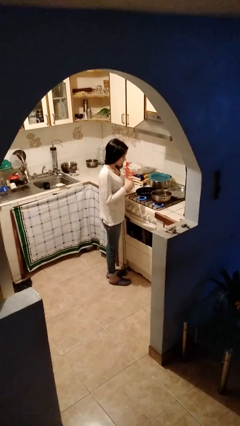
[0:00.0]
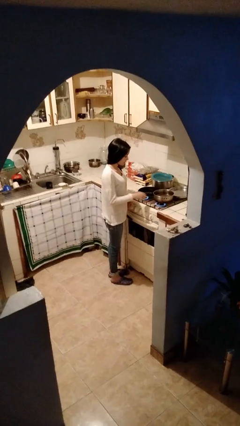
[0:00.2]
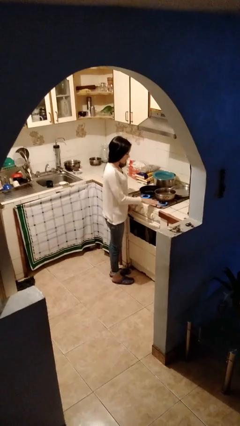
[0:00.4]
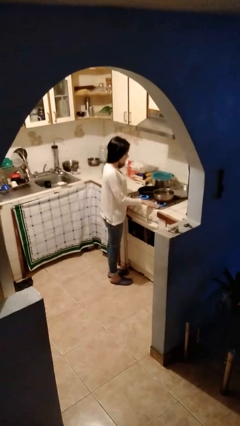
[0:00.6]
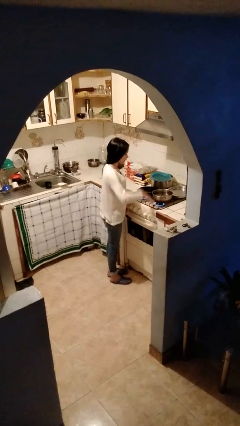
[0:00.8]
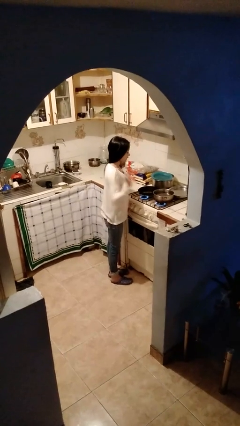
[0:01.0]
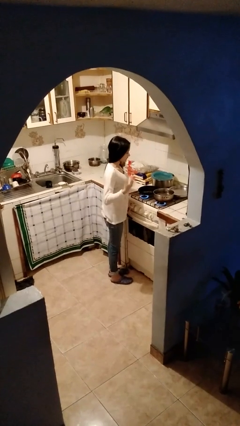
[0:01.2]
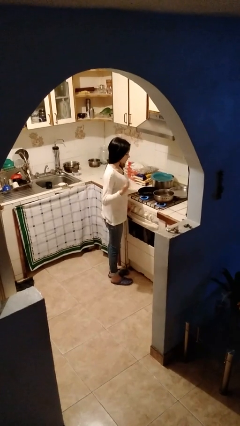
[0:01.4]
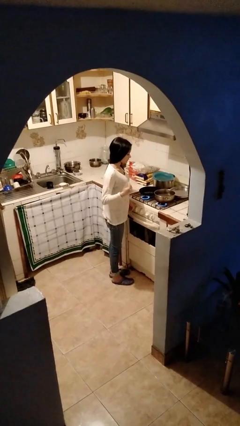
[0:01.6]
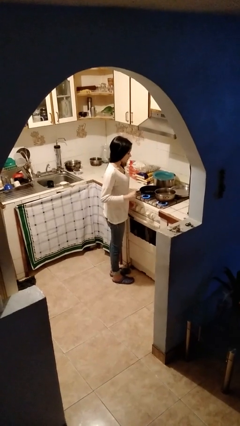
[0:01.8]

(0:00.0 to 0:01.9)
person burns hand

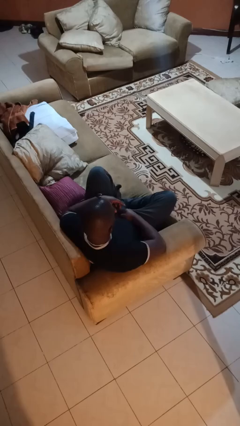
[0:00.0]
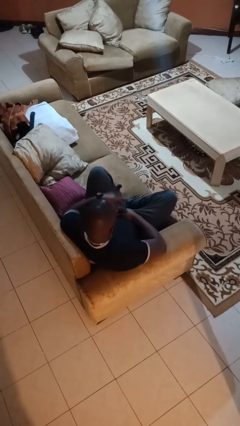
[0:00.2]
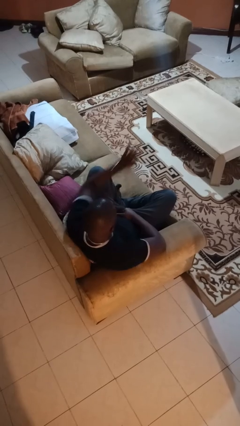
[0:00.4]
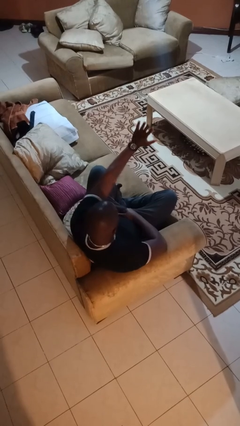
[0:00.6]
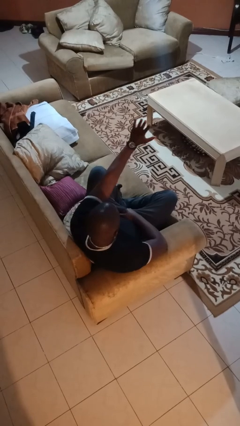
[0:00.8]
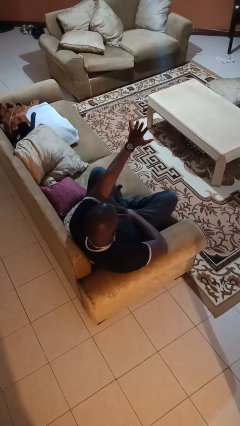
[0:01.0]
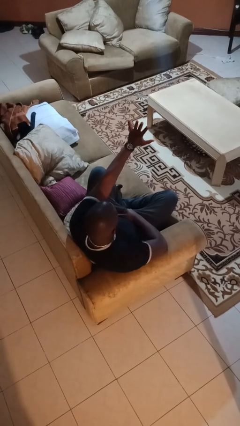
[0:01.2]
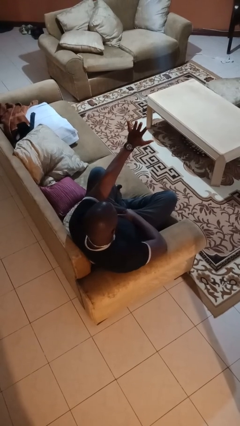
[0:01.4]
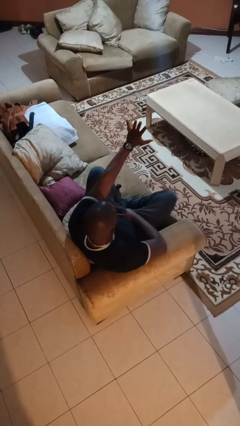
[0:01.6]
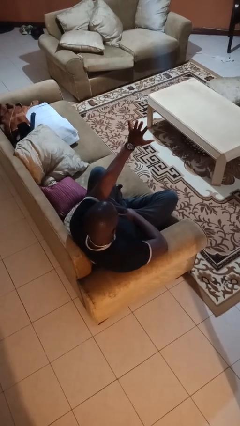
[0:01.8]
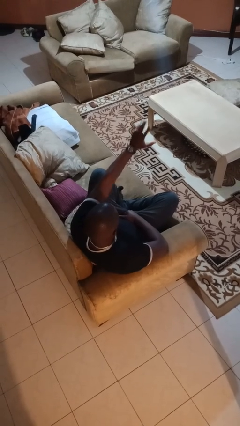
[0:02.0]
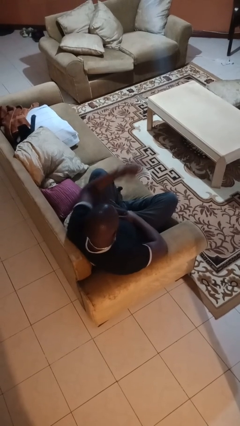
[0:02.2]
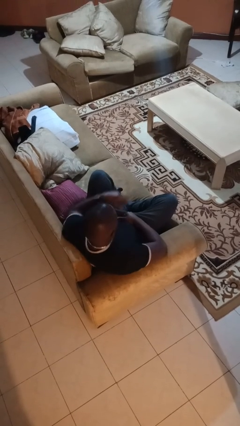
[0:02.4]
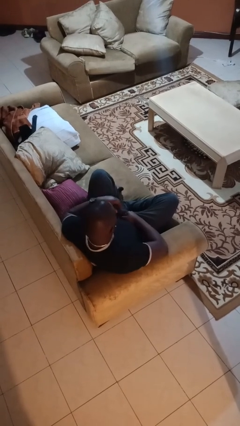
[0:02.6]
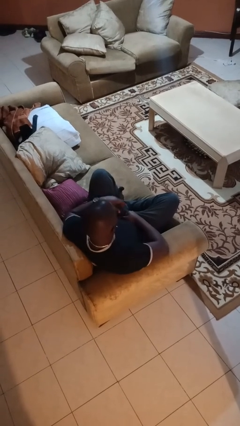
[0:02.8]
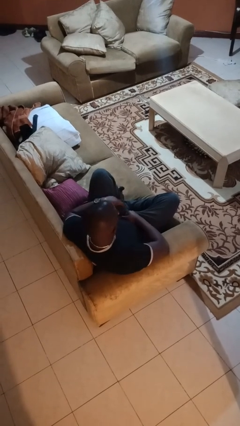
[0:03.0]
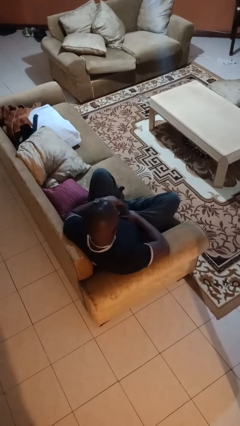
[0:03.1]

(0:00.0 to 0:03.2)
person gestures stop

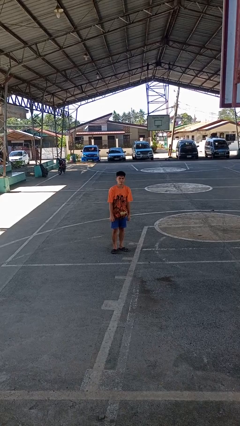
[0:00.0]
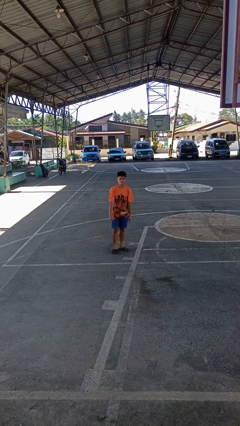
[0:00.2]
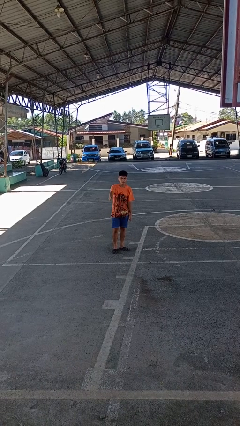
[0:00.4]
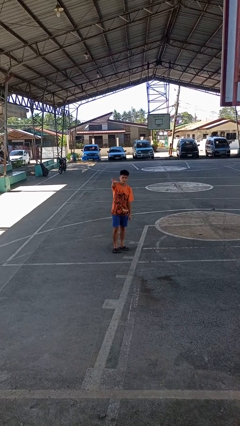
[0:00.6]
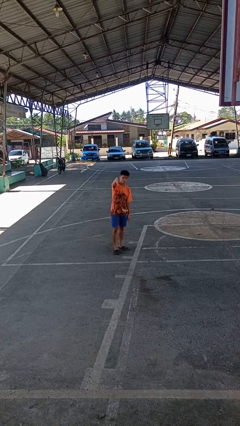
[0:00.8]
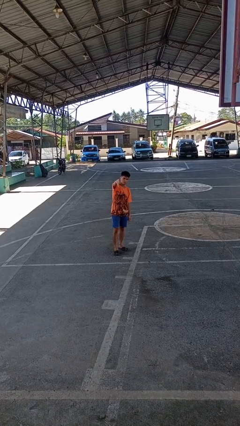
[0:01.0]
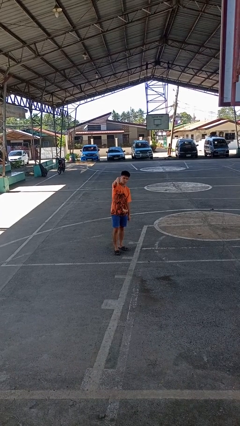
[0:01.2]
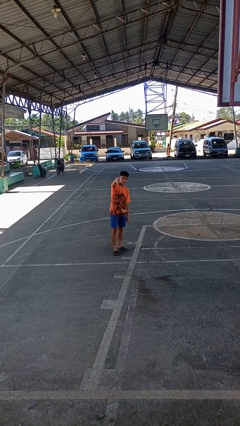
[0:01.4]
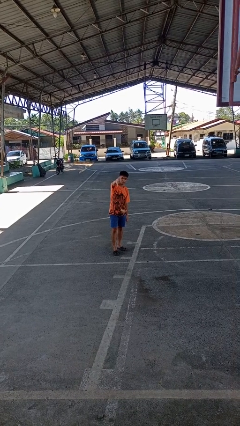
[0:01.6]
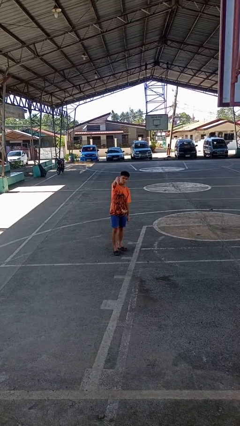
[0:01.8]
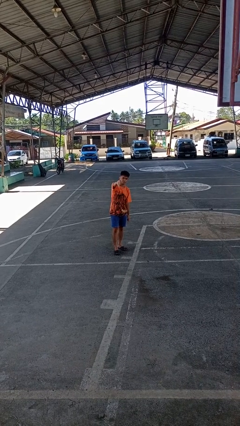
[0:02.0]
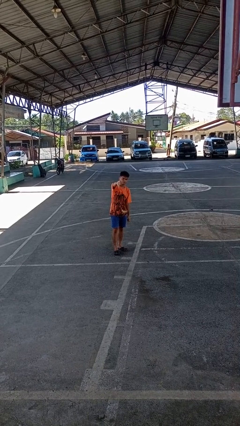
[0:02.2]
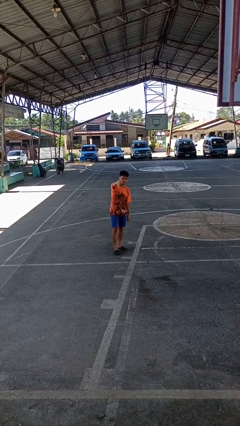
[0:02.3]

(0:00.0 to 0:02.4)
person gestures thumbs down

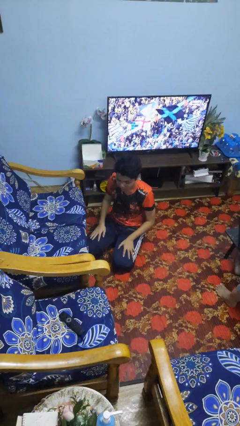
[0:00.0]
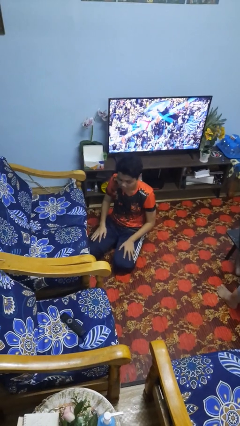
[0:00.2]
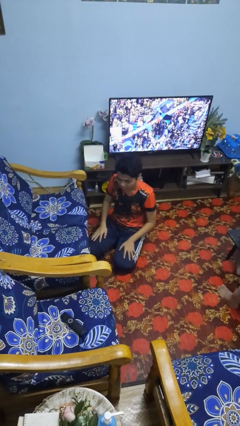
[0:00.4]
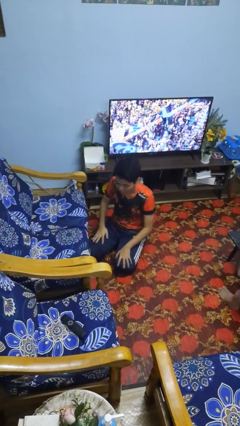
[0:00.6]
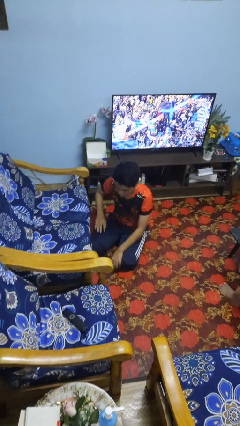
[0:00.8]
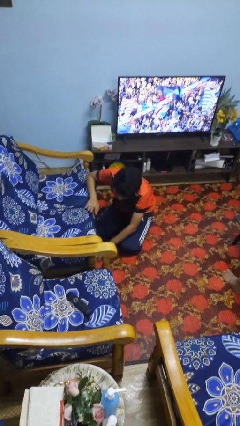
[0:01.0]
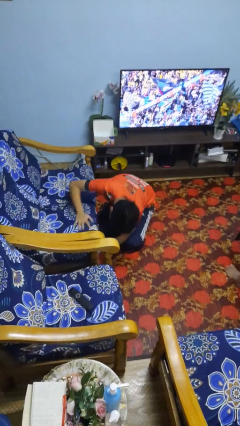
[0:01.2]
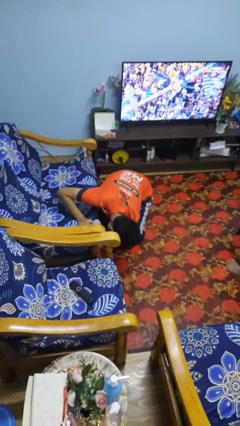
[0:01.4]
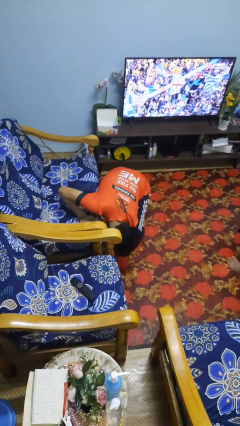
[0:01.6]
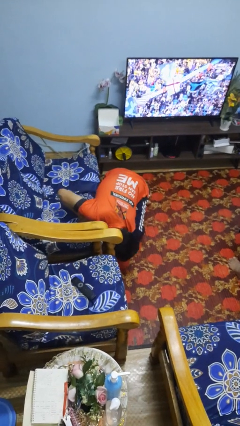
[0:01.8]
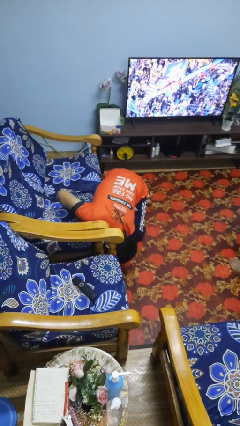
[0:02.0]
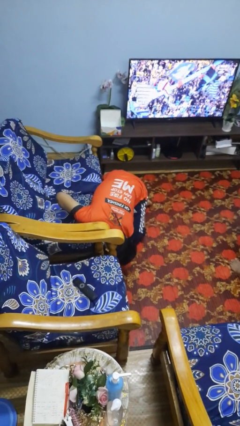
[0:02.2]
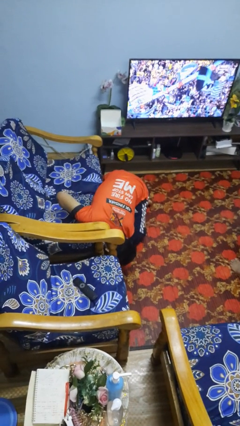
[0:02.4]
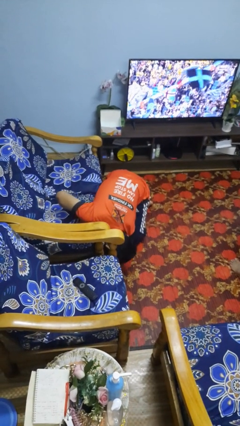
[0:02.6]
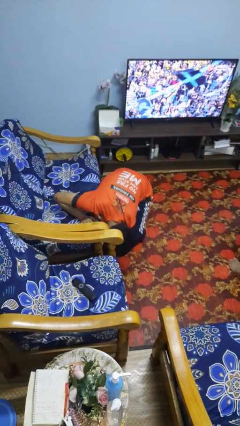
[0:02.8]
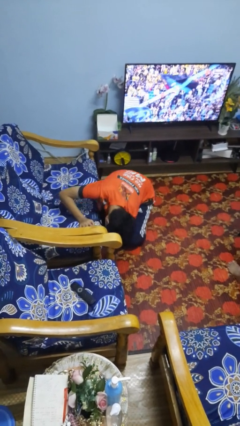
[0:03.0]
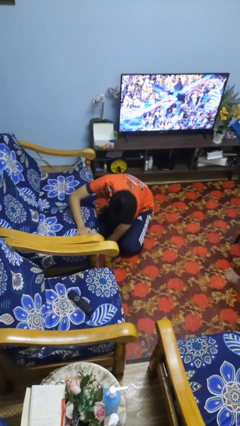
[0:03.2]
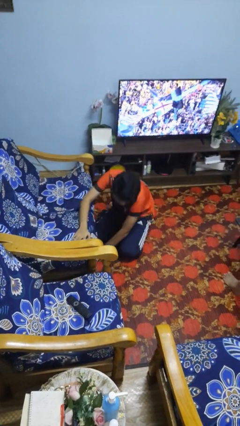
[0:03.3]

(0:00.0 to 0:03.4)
person searches under couch

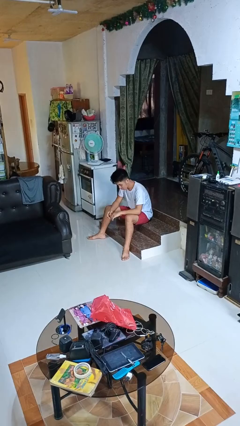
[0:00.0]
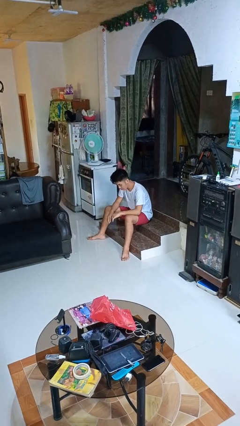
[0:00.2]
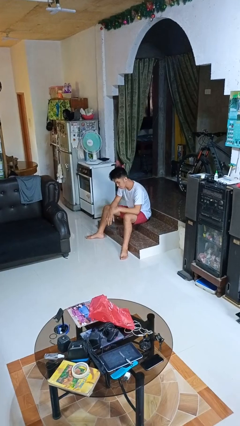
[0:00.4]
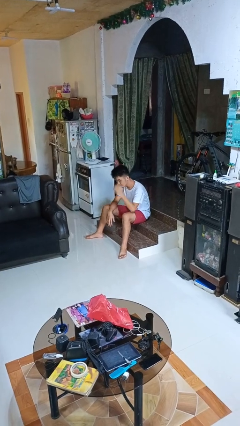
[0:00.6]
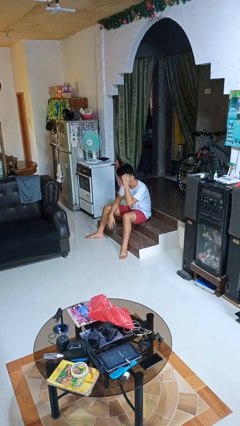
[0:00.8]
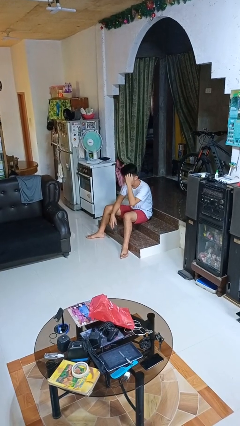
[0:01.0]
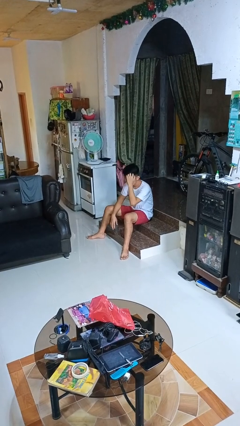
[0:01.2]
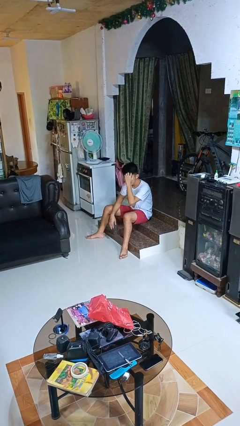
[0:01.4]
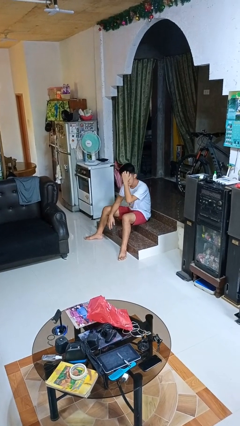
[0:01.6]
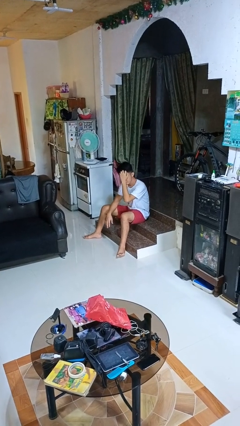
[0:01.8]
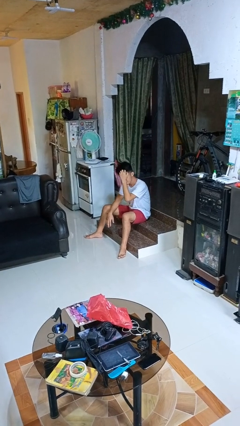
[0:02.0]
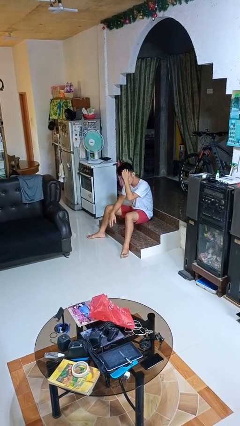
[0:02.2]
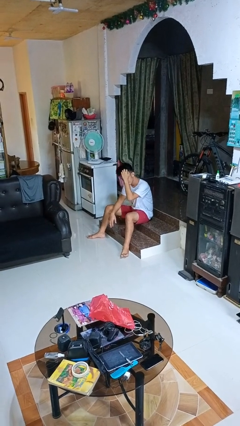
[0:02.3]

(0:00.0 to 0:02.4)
person scratches face

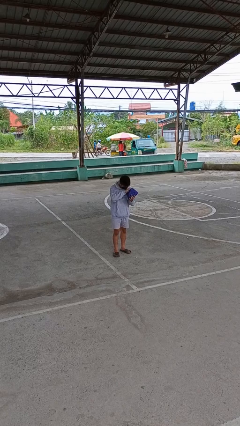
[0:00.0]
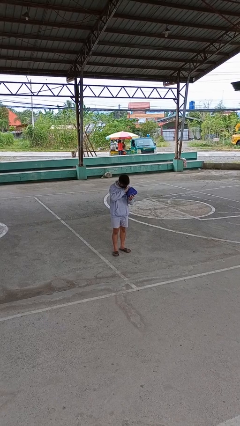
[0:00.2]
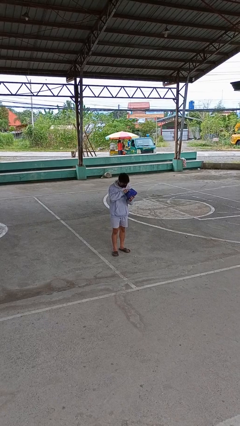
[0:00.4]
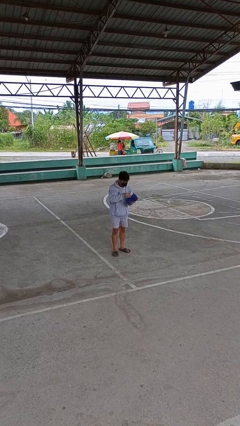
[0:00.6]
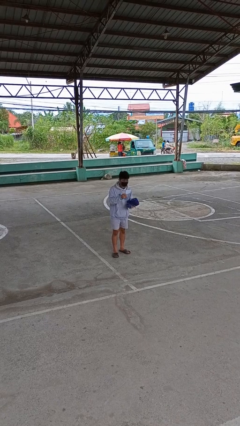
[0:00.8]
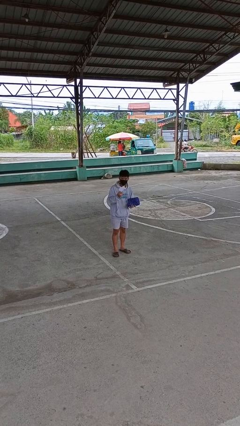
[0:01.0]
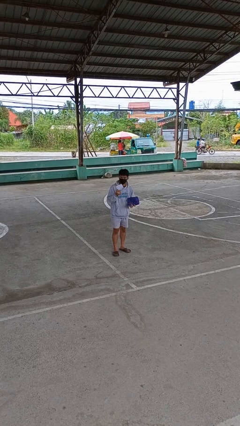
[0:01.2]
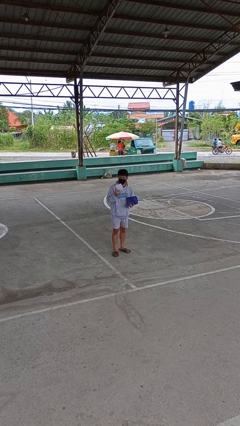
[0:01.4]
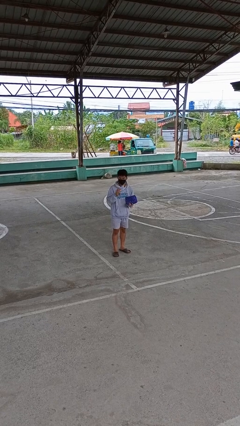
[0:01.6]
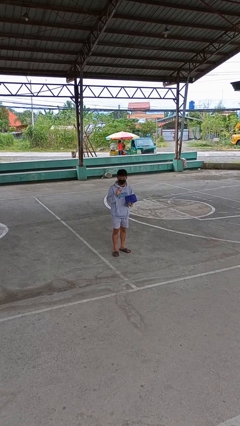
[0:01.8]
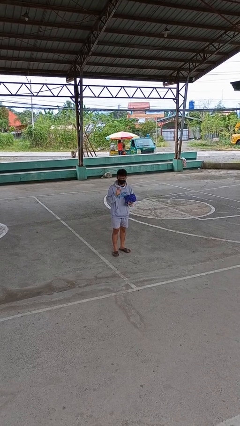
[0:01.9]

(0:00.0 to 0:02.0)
person takes object from purse

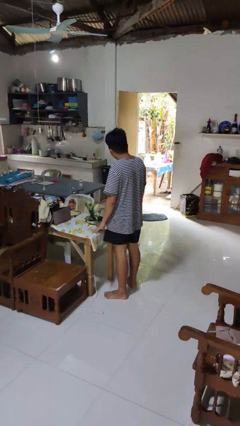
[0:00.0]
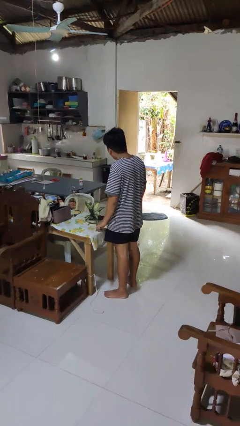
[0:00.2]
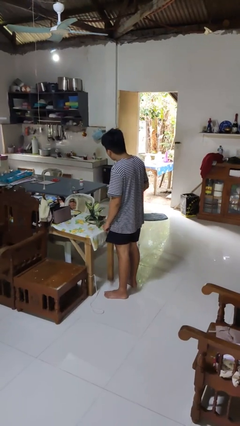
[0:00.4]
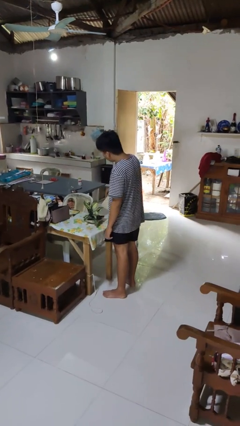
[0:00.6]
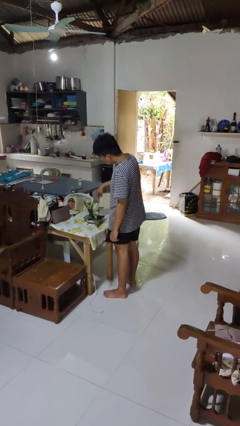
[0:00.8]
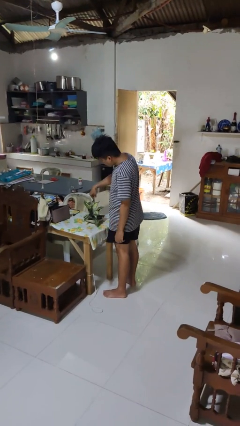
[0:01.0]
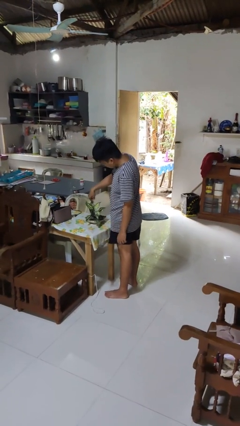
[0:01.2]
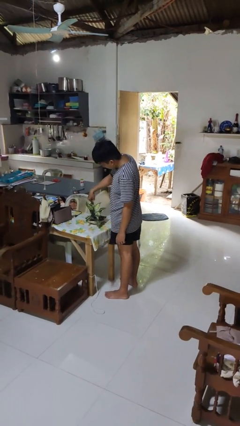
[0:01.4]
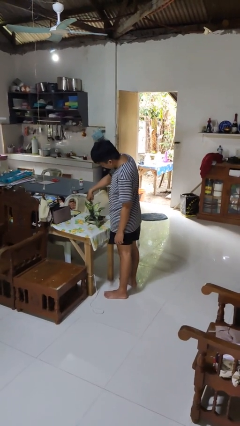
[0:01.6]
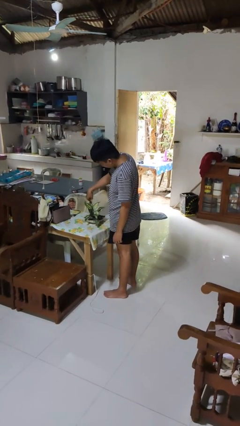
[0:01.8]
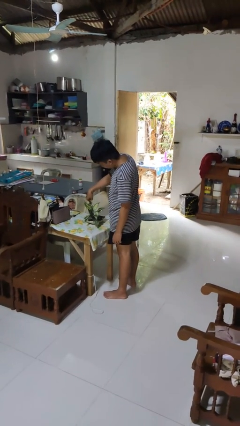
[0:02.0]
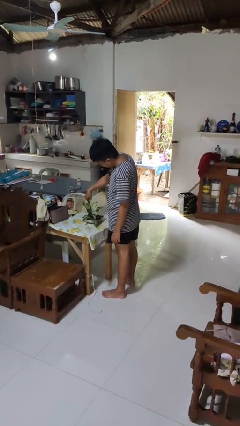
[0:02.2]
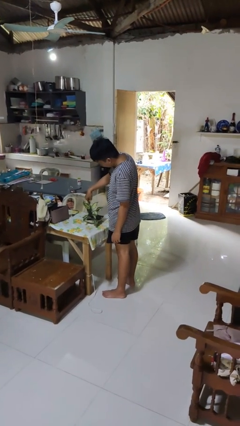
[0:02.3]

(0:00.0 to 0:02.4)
person waters houseplant
